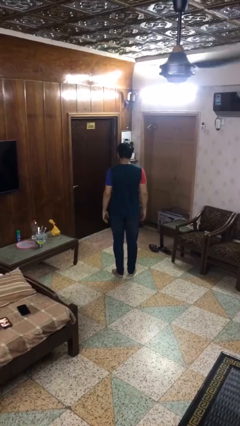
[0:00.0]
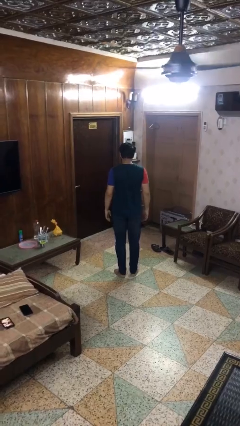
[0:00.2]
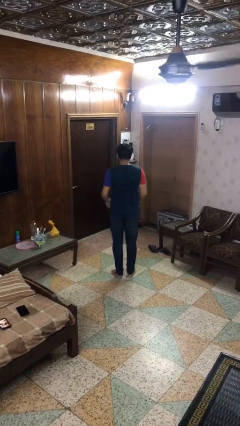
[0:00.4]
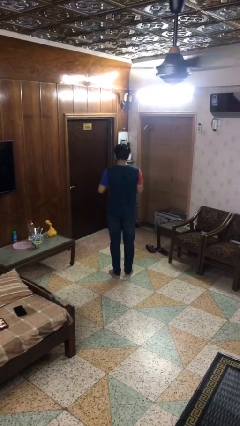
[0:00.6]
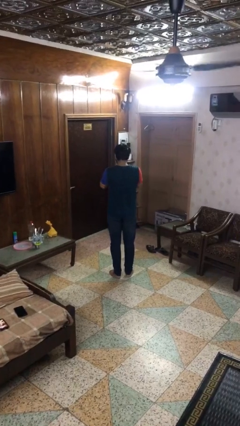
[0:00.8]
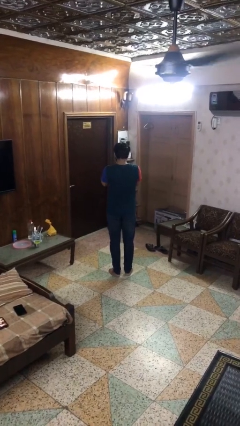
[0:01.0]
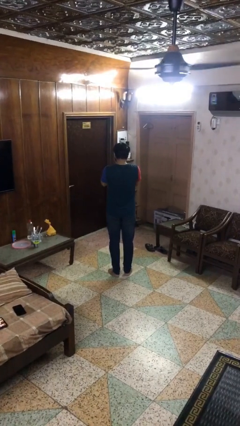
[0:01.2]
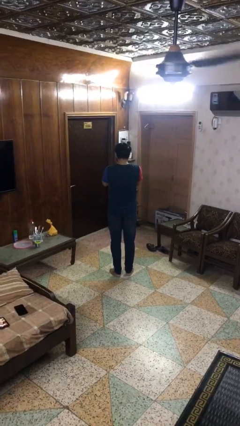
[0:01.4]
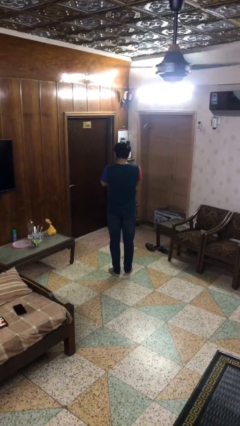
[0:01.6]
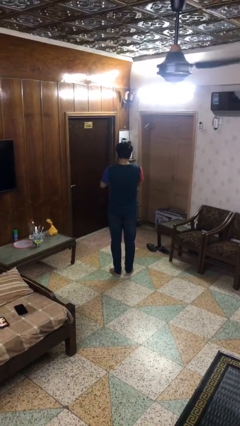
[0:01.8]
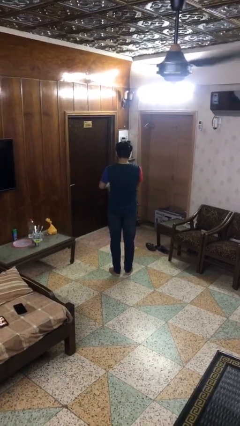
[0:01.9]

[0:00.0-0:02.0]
person sneezes into hand

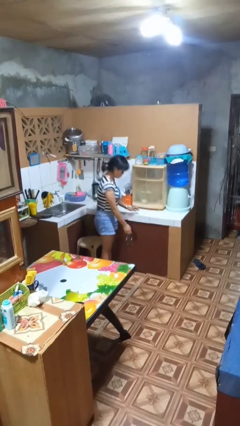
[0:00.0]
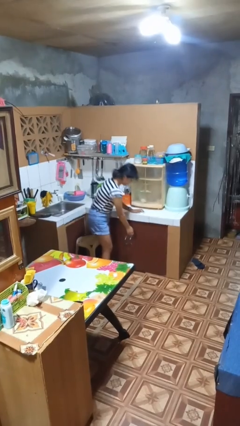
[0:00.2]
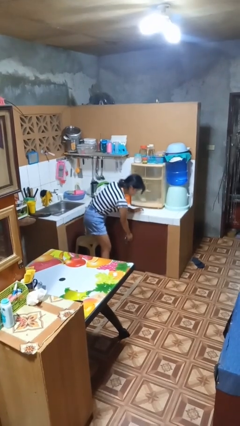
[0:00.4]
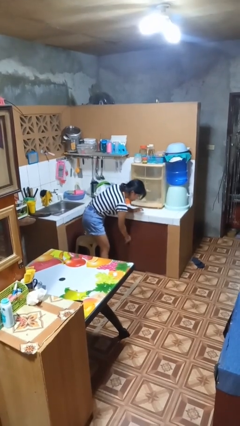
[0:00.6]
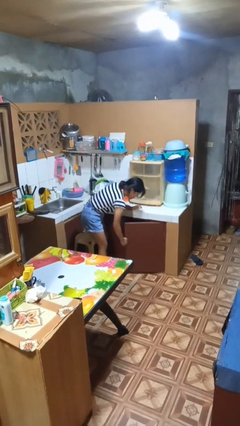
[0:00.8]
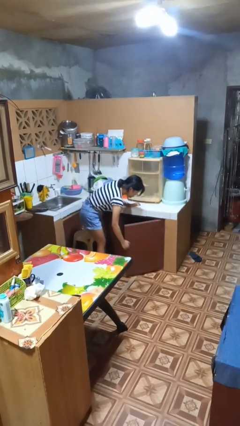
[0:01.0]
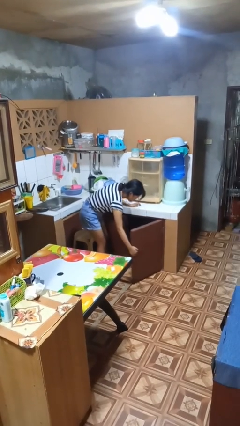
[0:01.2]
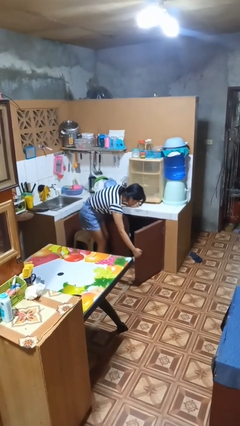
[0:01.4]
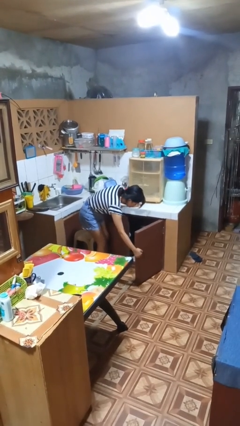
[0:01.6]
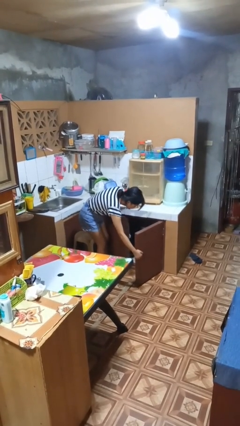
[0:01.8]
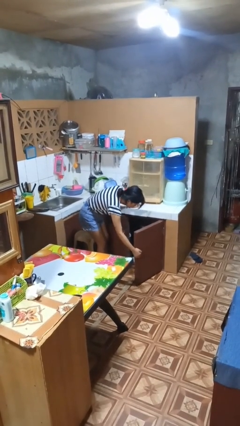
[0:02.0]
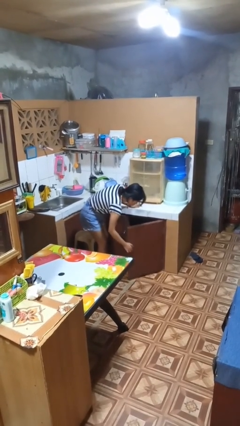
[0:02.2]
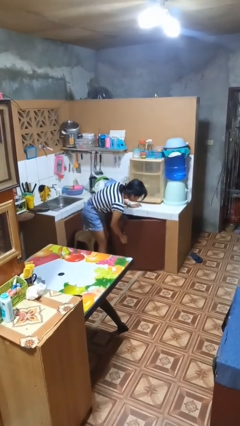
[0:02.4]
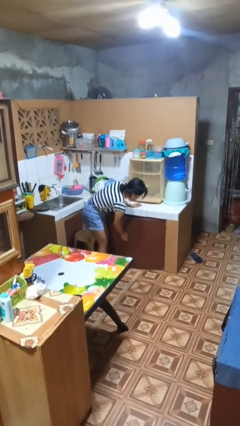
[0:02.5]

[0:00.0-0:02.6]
person opens cabinet

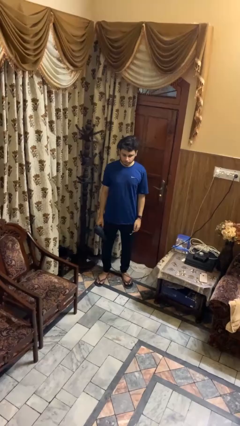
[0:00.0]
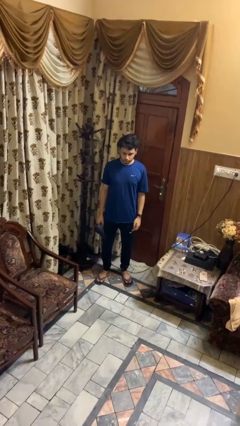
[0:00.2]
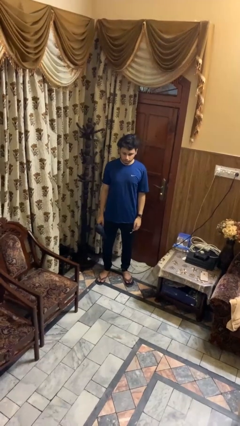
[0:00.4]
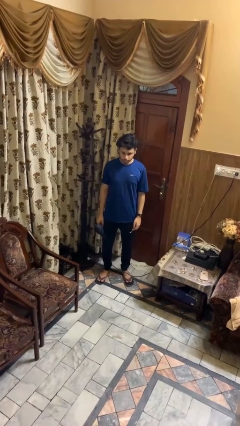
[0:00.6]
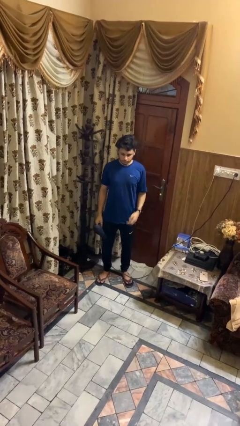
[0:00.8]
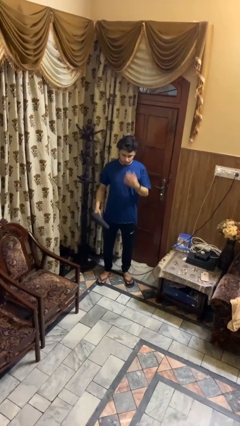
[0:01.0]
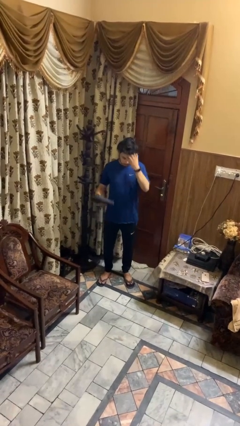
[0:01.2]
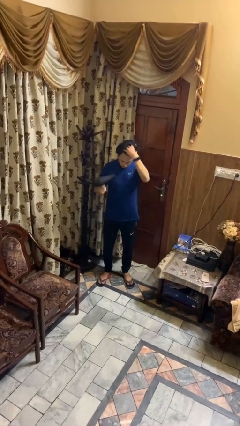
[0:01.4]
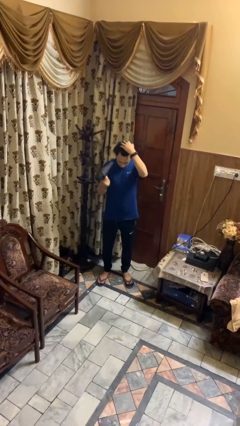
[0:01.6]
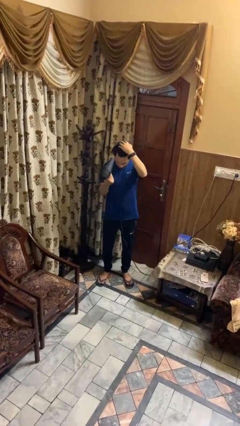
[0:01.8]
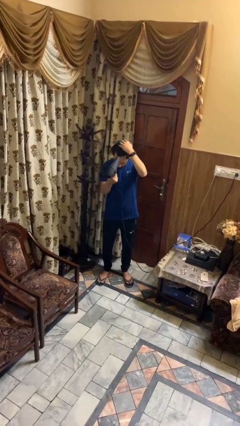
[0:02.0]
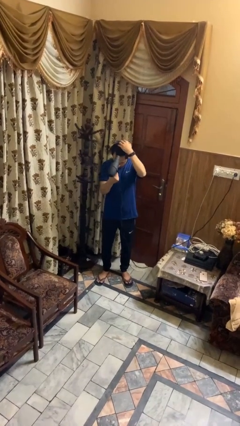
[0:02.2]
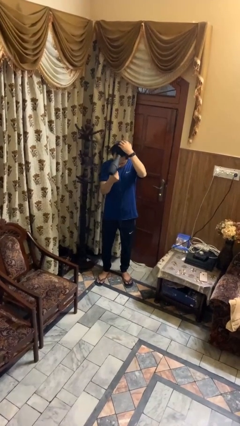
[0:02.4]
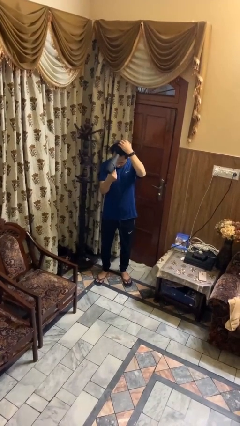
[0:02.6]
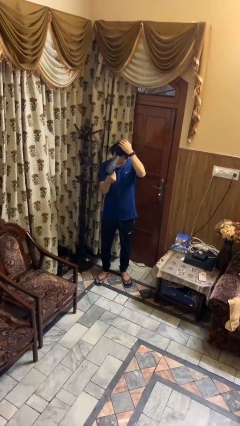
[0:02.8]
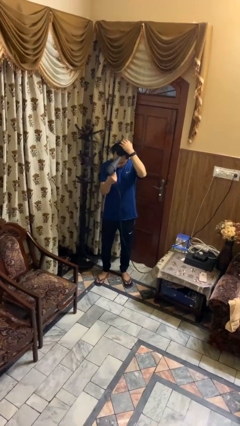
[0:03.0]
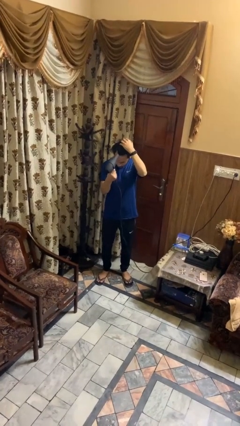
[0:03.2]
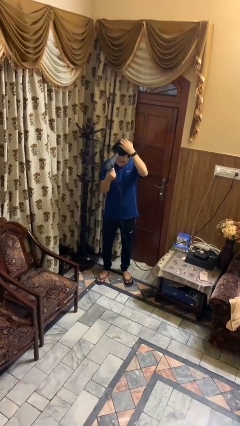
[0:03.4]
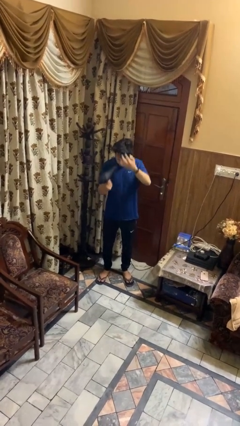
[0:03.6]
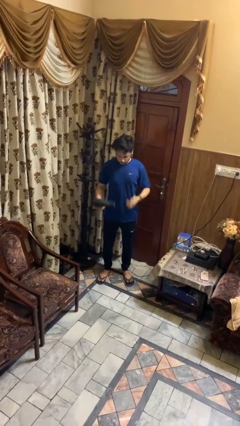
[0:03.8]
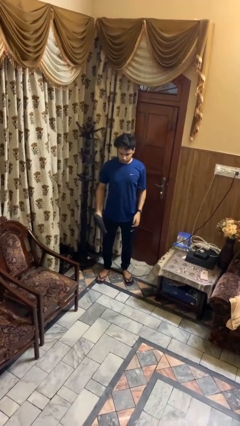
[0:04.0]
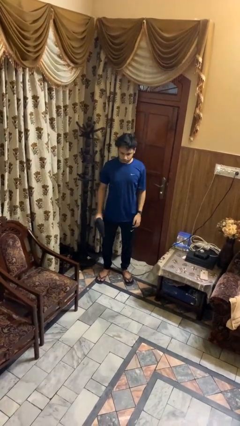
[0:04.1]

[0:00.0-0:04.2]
person dries hair with hairdryer

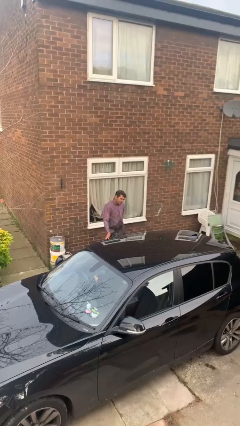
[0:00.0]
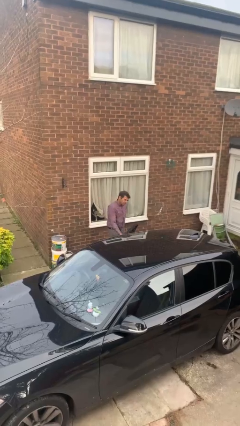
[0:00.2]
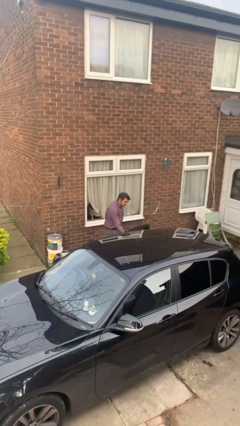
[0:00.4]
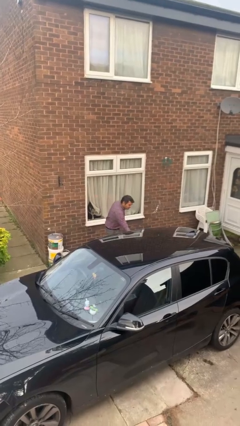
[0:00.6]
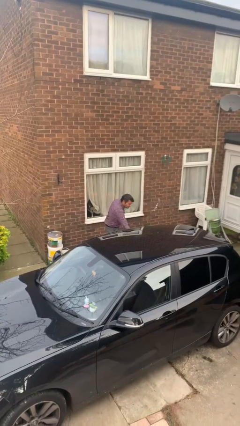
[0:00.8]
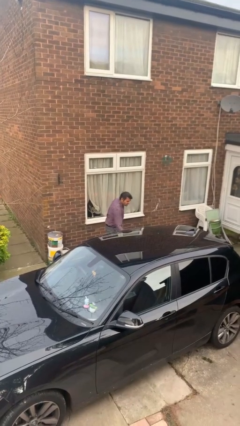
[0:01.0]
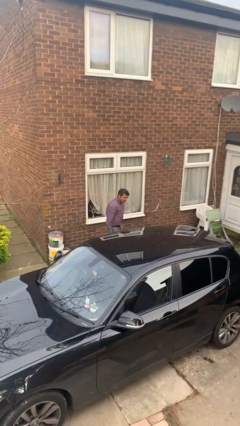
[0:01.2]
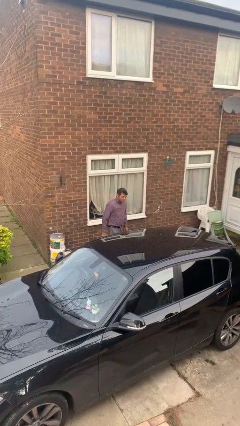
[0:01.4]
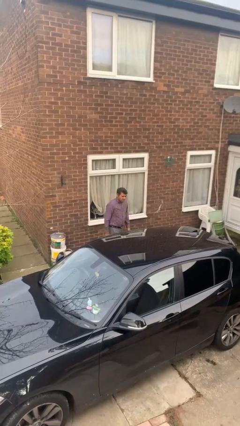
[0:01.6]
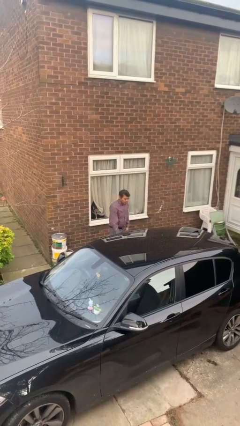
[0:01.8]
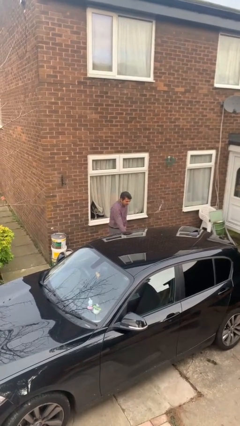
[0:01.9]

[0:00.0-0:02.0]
person closes car door

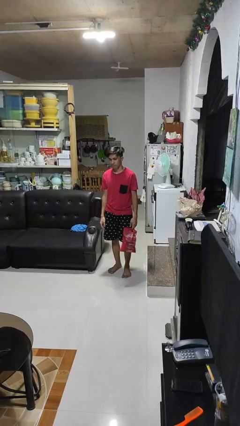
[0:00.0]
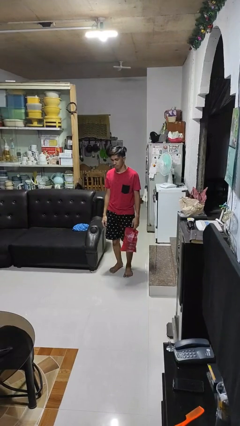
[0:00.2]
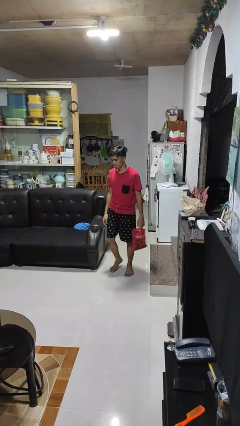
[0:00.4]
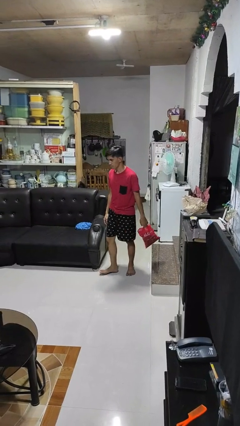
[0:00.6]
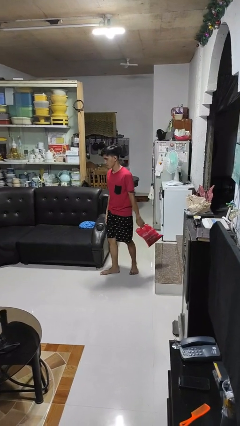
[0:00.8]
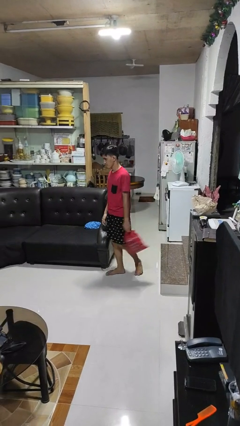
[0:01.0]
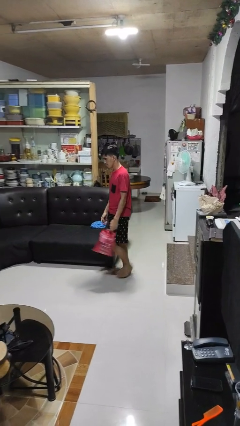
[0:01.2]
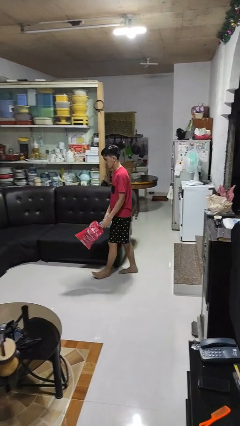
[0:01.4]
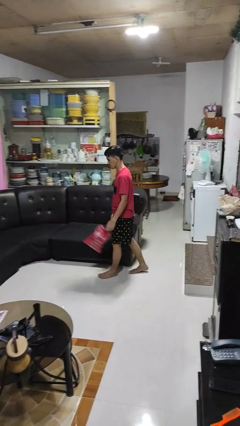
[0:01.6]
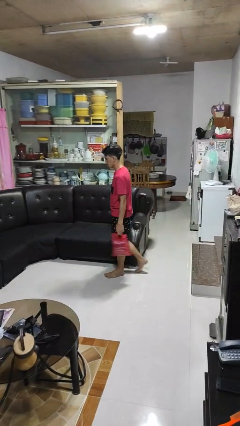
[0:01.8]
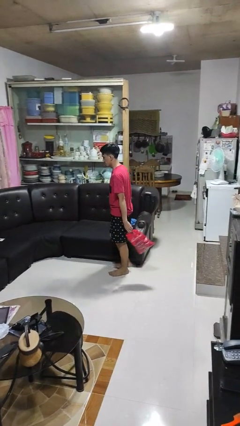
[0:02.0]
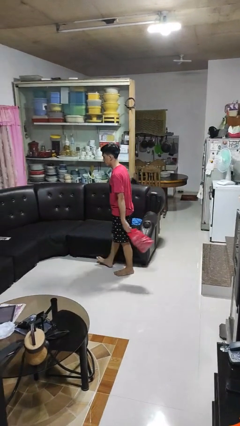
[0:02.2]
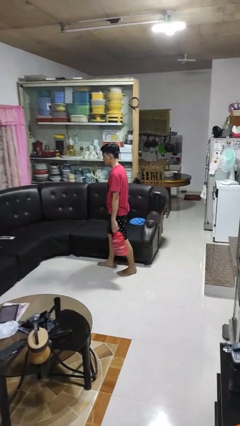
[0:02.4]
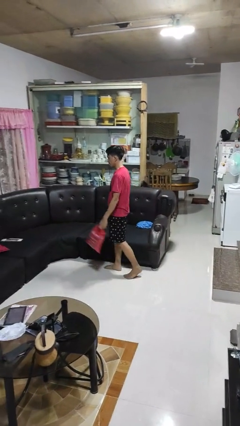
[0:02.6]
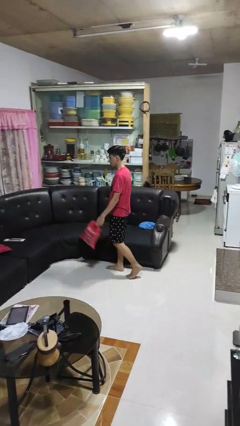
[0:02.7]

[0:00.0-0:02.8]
person carries groceries

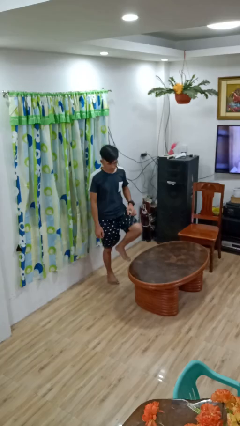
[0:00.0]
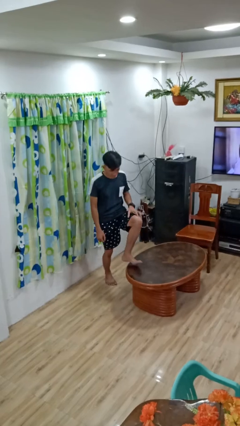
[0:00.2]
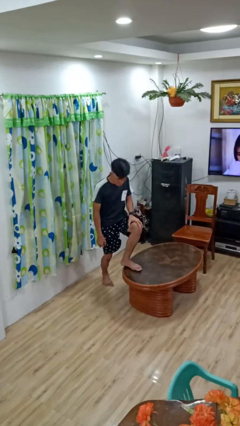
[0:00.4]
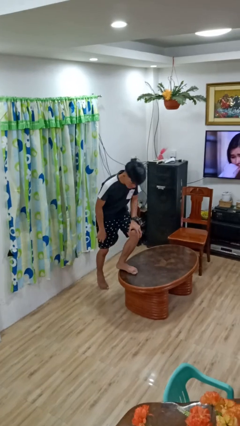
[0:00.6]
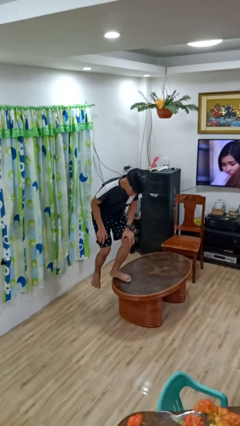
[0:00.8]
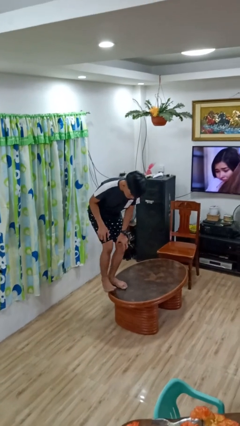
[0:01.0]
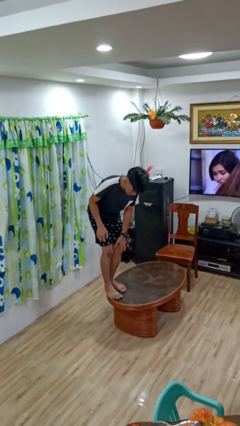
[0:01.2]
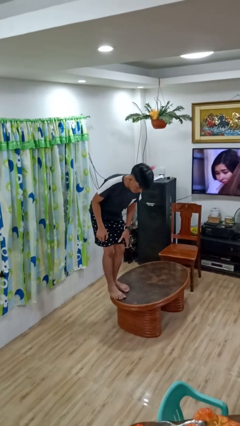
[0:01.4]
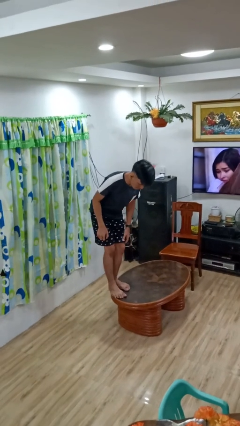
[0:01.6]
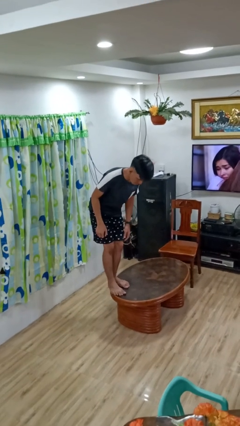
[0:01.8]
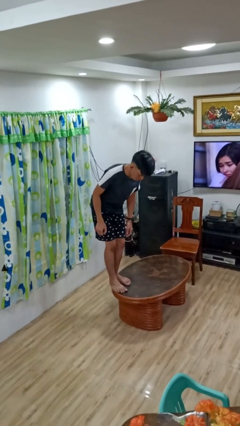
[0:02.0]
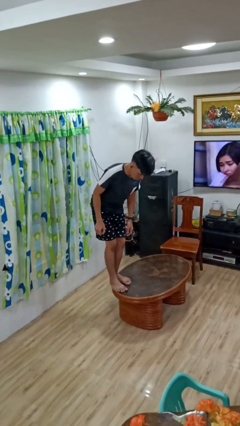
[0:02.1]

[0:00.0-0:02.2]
person climbs on table

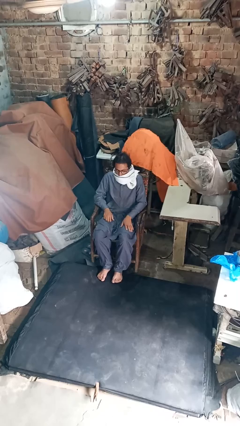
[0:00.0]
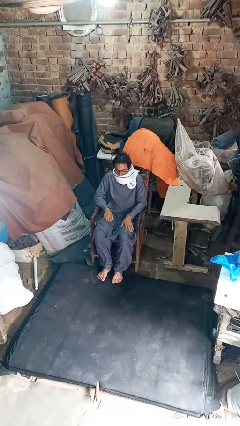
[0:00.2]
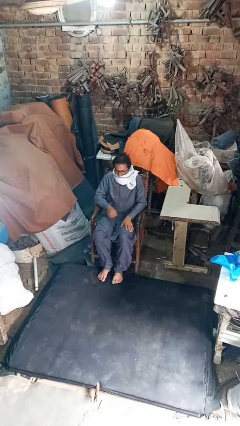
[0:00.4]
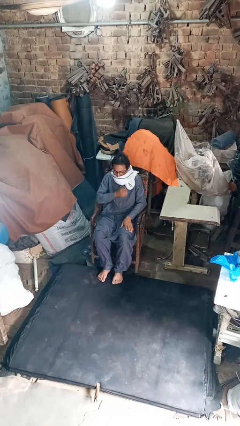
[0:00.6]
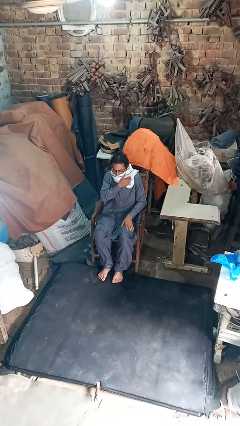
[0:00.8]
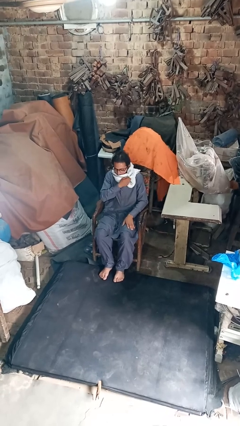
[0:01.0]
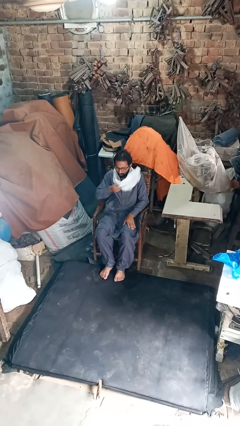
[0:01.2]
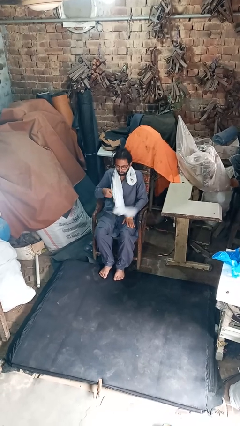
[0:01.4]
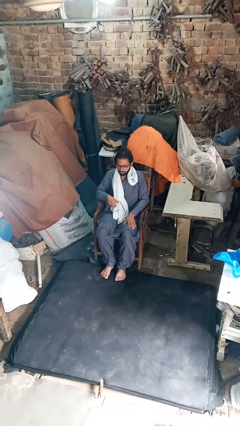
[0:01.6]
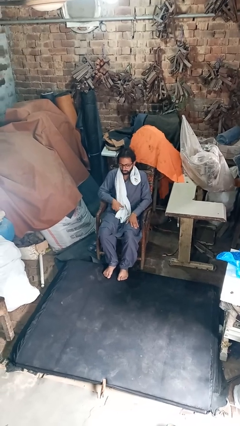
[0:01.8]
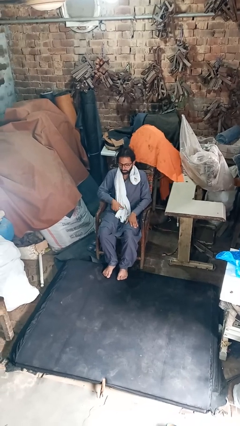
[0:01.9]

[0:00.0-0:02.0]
person takes off scarf
